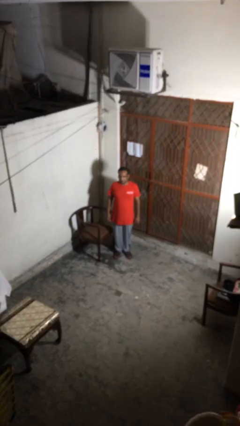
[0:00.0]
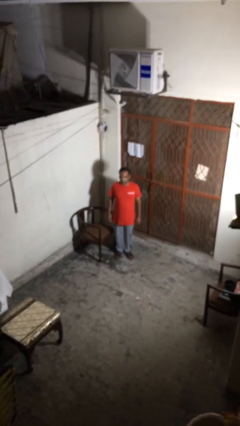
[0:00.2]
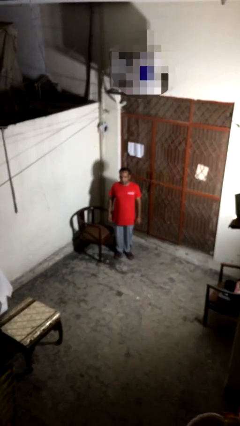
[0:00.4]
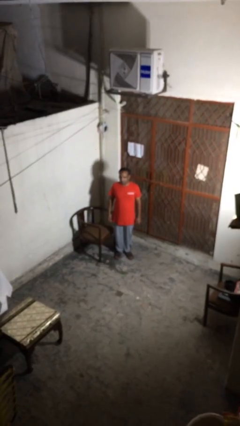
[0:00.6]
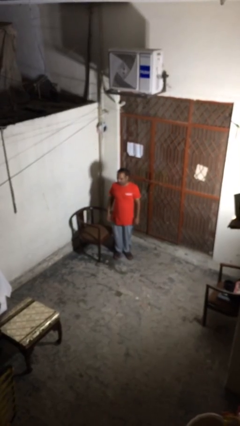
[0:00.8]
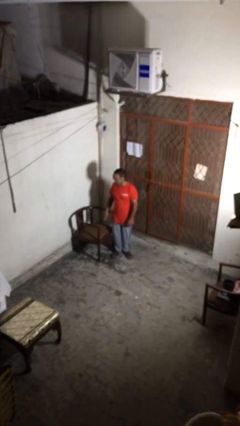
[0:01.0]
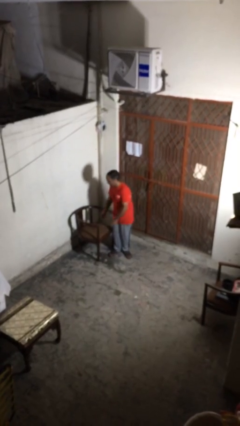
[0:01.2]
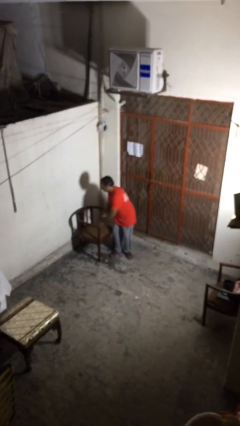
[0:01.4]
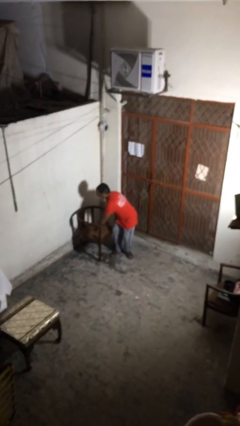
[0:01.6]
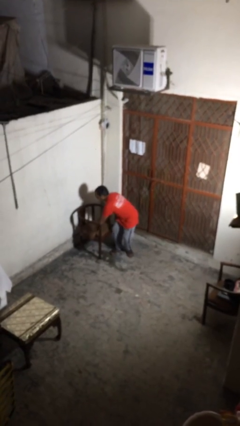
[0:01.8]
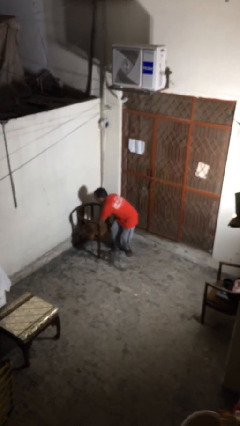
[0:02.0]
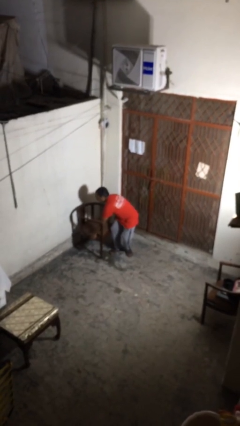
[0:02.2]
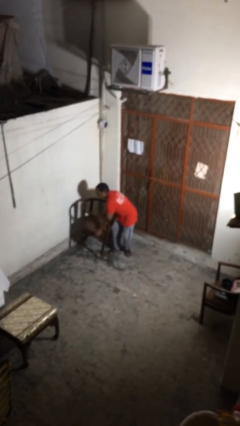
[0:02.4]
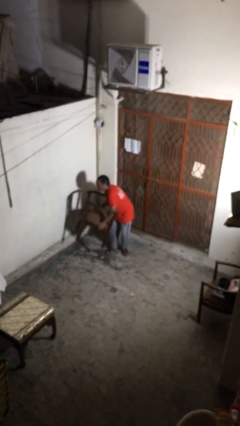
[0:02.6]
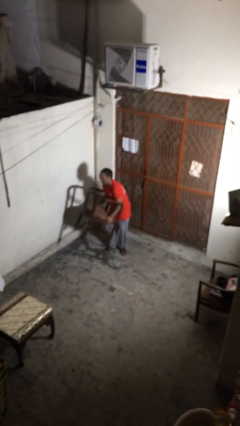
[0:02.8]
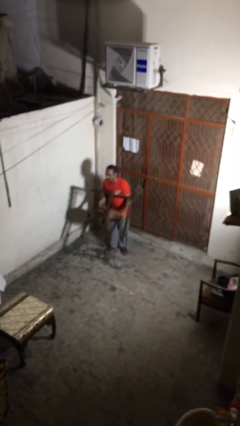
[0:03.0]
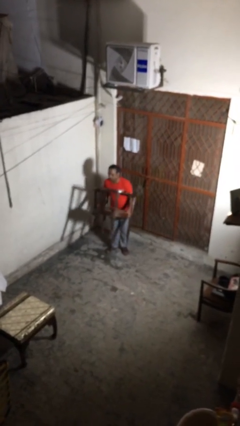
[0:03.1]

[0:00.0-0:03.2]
person picks up object from floor

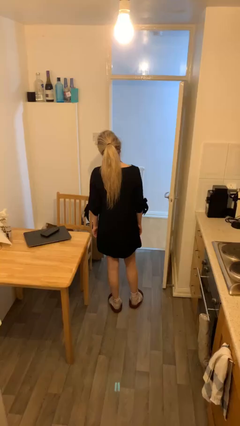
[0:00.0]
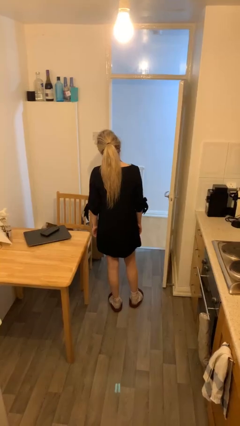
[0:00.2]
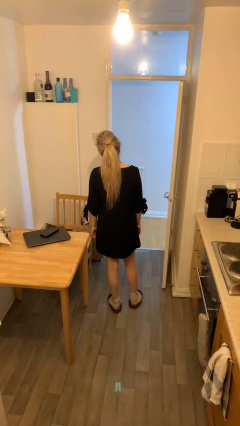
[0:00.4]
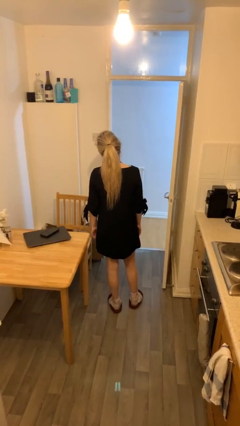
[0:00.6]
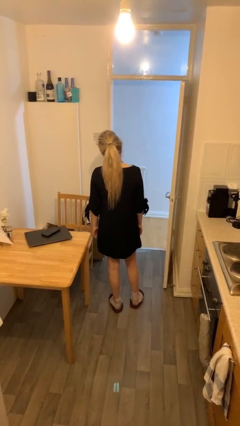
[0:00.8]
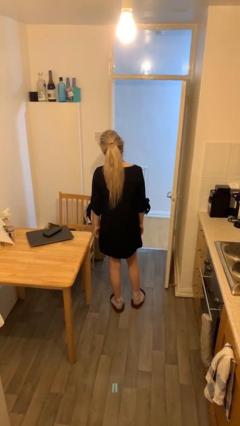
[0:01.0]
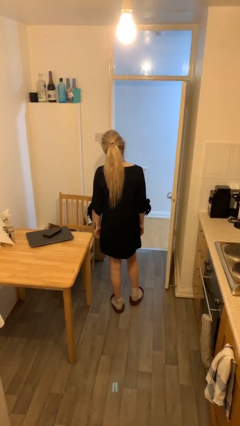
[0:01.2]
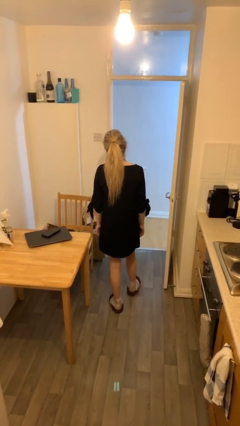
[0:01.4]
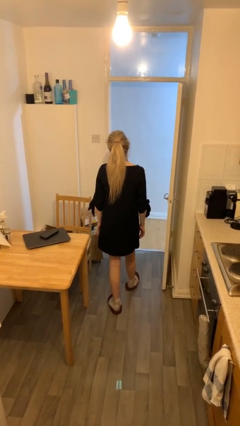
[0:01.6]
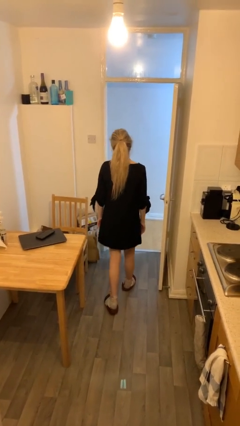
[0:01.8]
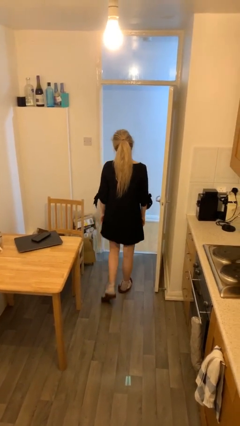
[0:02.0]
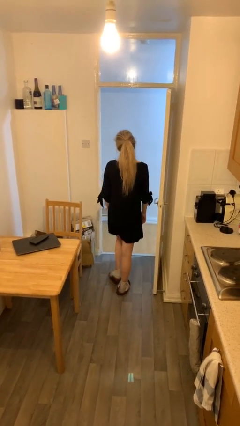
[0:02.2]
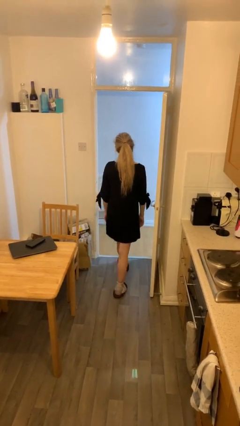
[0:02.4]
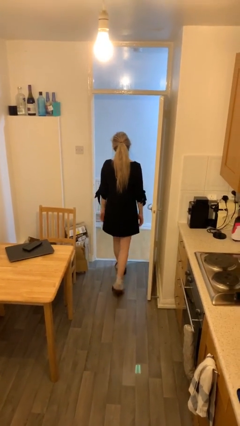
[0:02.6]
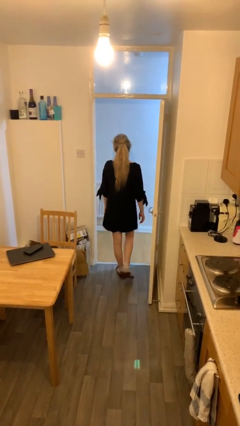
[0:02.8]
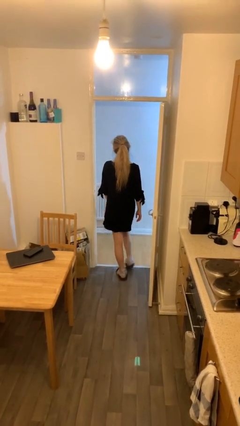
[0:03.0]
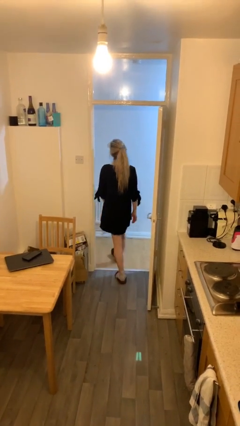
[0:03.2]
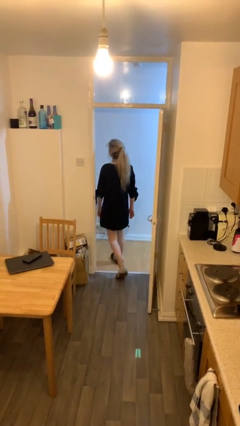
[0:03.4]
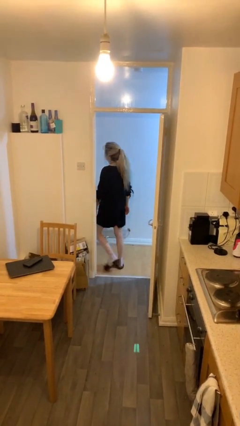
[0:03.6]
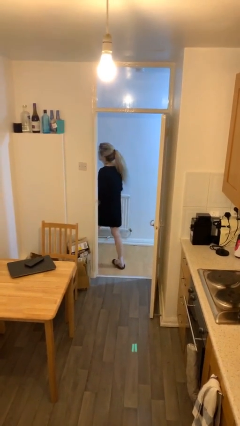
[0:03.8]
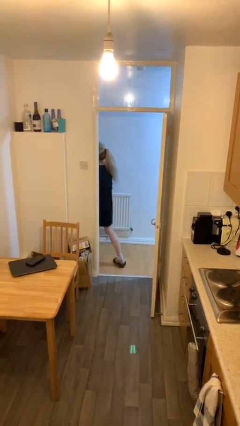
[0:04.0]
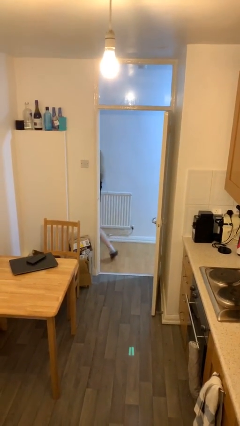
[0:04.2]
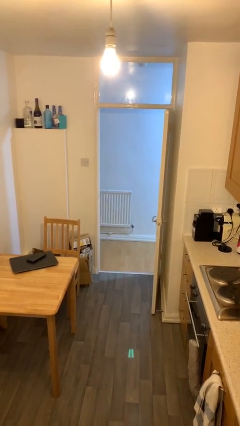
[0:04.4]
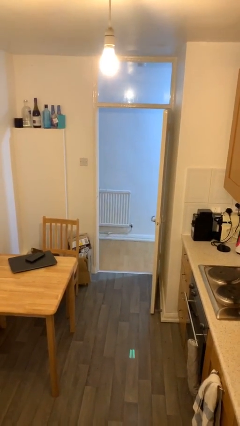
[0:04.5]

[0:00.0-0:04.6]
person exits scene through structure

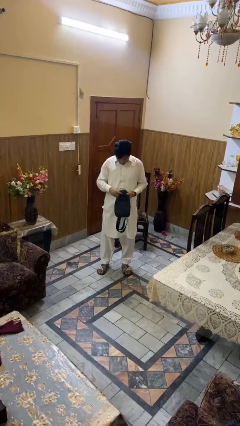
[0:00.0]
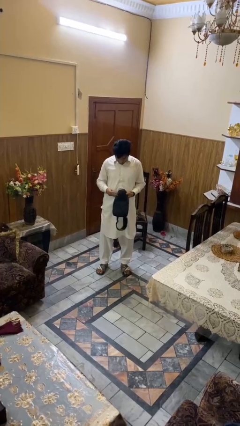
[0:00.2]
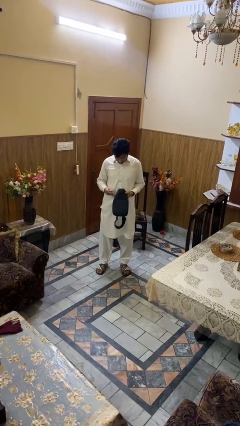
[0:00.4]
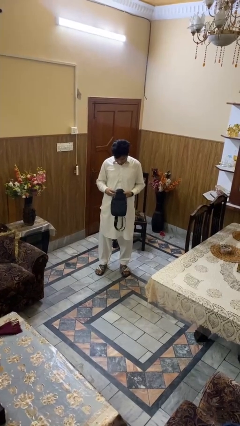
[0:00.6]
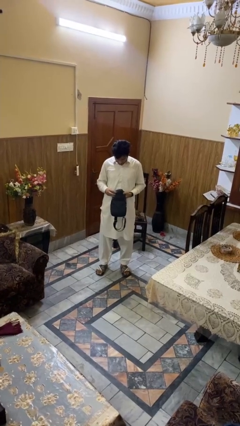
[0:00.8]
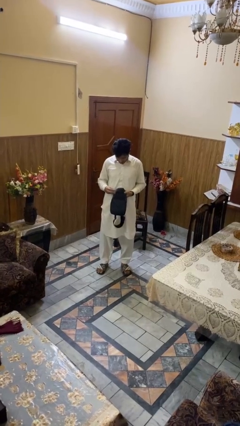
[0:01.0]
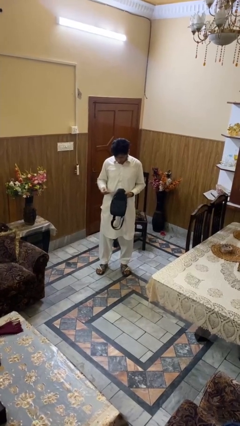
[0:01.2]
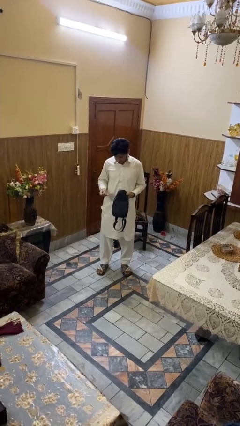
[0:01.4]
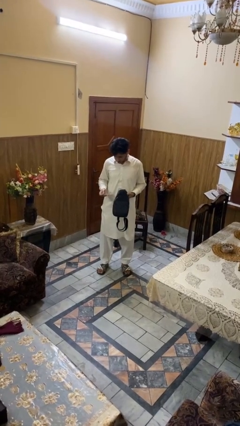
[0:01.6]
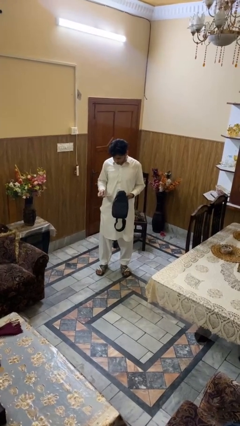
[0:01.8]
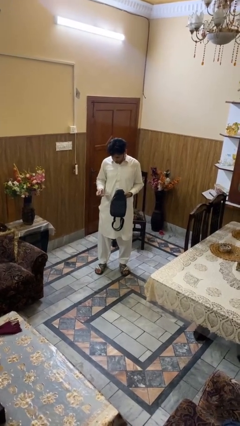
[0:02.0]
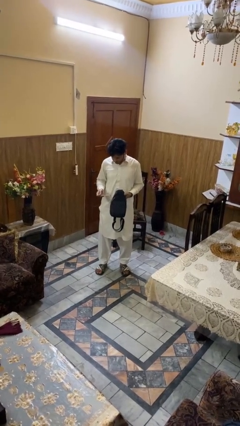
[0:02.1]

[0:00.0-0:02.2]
person takes object from purse

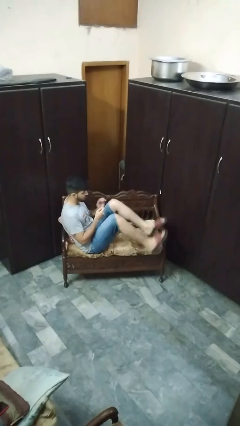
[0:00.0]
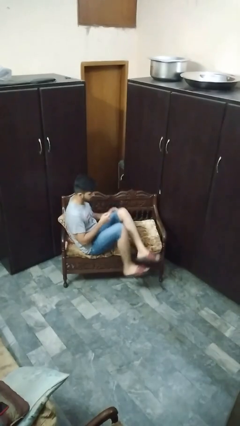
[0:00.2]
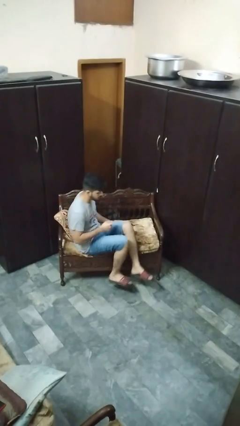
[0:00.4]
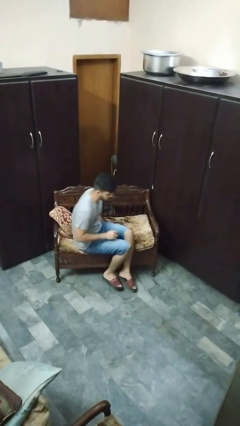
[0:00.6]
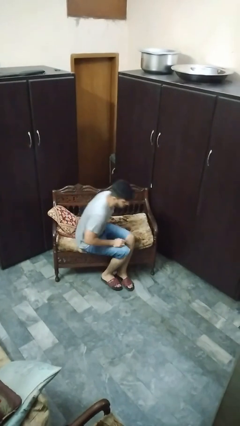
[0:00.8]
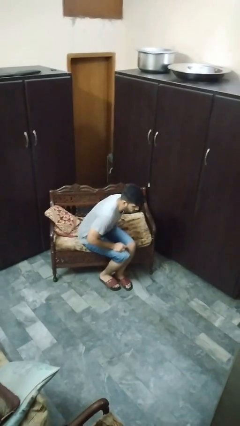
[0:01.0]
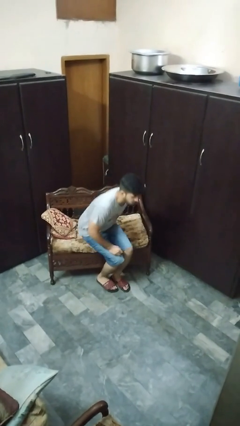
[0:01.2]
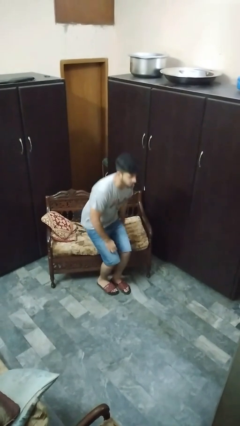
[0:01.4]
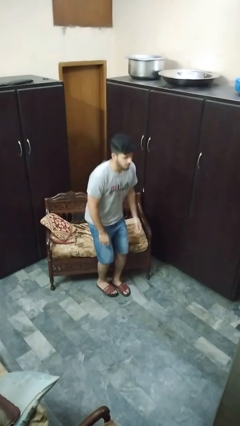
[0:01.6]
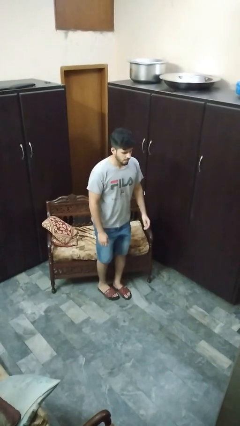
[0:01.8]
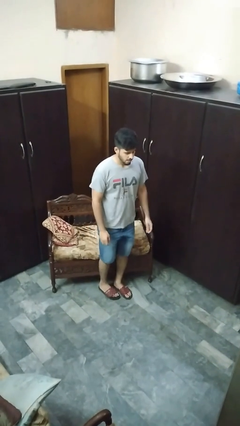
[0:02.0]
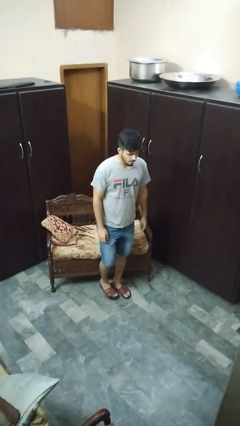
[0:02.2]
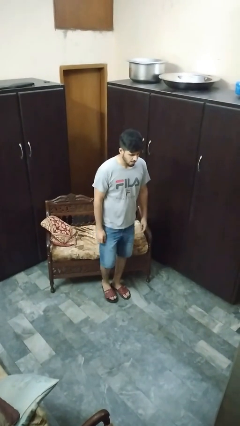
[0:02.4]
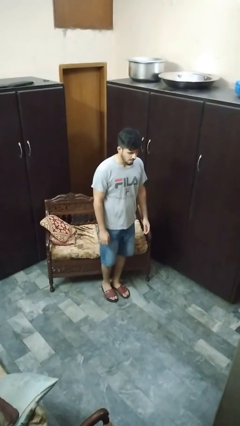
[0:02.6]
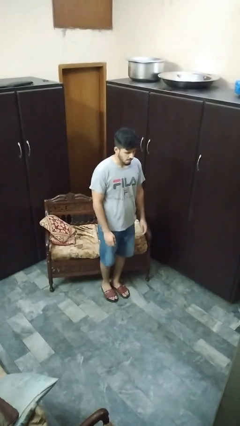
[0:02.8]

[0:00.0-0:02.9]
person stands up

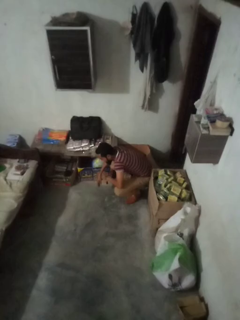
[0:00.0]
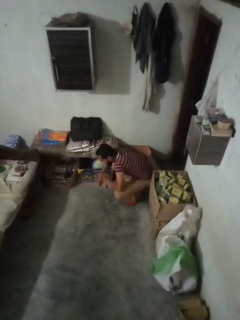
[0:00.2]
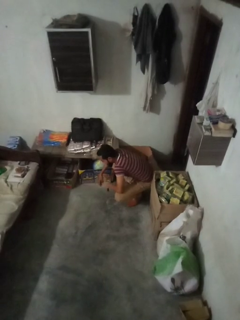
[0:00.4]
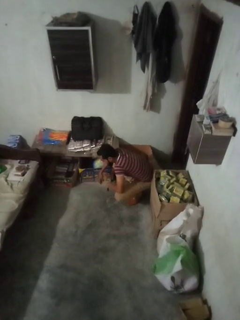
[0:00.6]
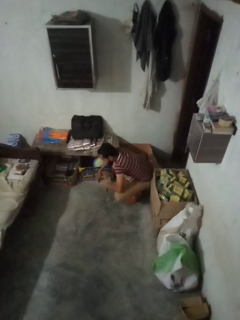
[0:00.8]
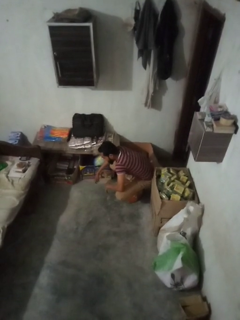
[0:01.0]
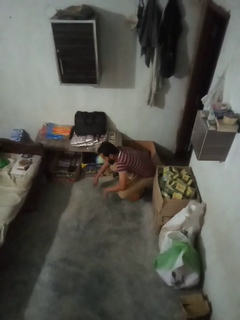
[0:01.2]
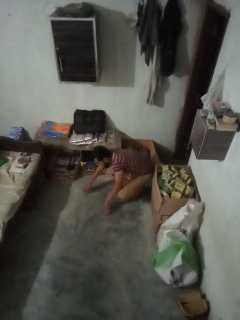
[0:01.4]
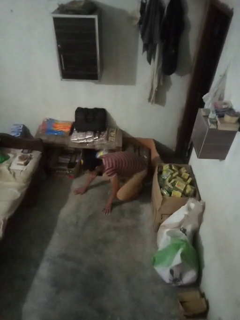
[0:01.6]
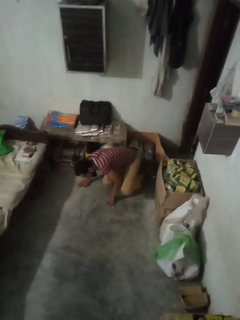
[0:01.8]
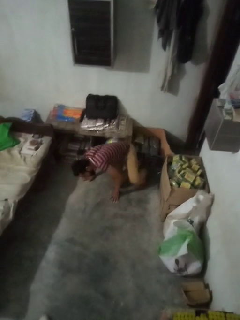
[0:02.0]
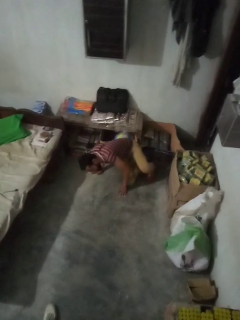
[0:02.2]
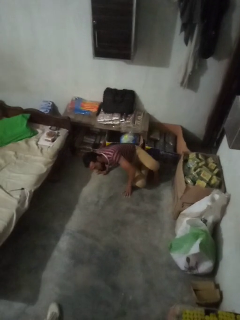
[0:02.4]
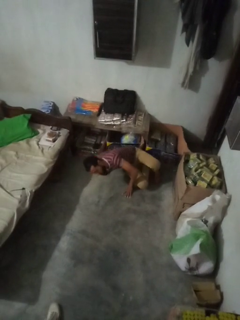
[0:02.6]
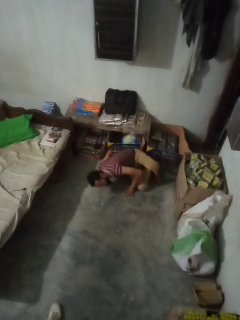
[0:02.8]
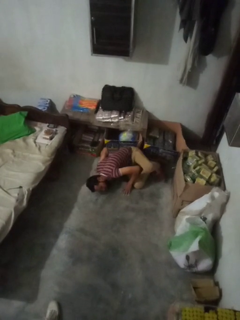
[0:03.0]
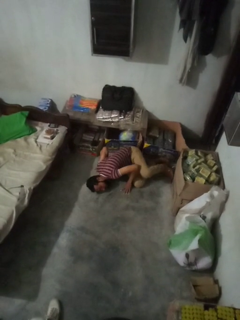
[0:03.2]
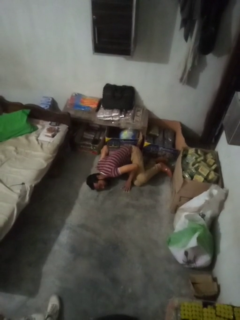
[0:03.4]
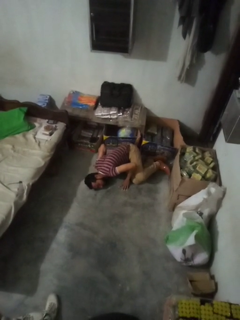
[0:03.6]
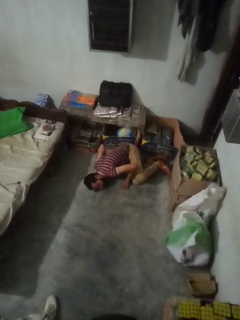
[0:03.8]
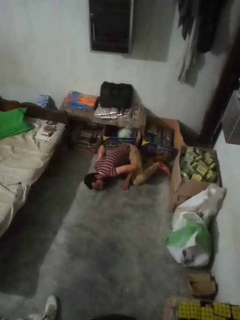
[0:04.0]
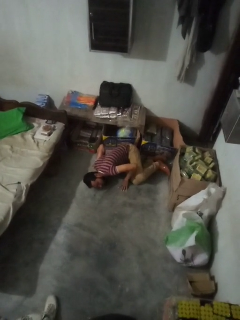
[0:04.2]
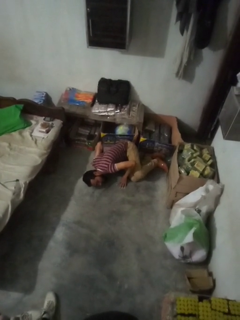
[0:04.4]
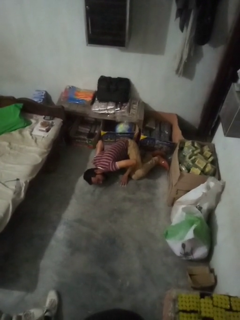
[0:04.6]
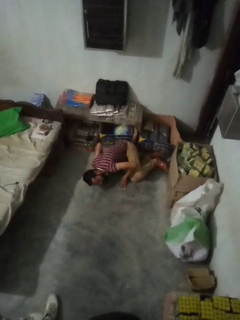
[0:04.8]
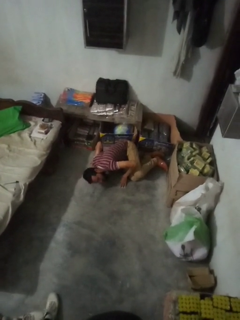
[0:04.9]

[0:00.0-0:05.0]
person lies down on floor

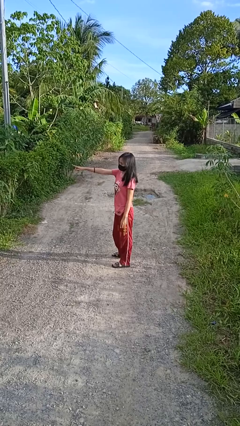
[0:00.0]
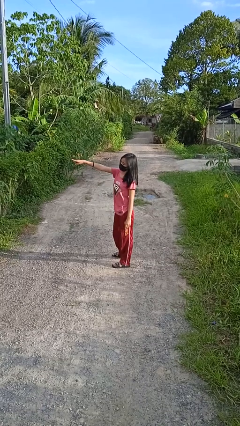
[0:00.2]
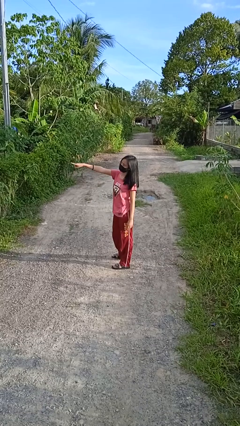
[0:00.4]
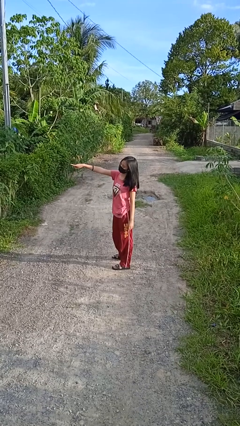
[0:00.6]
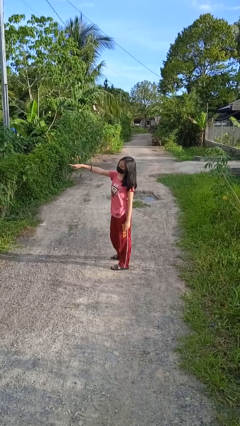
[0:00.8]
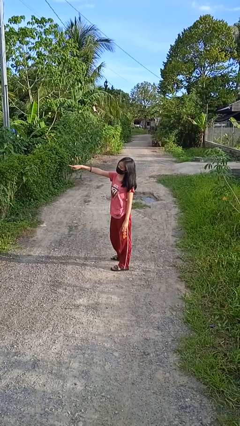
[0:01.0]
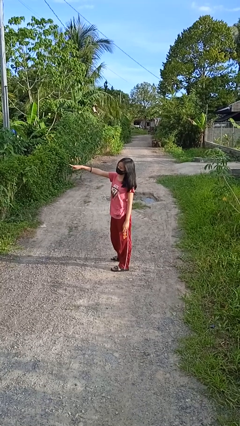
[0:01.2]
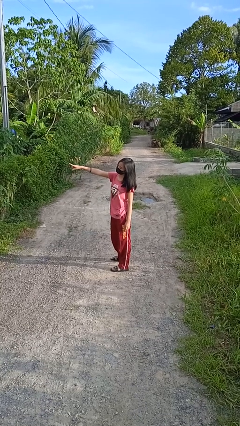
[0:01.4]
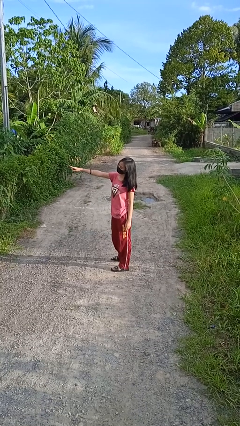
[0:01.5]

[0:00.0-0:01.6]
person points at person
